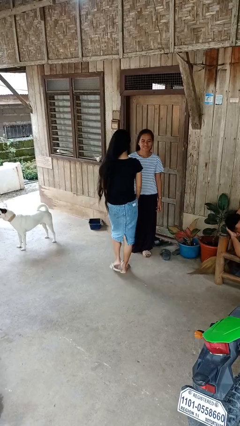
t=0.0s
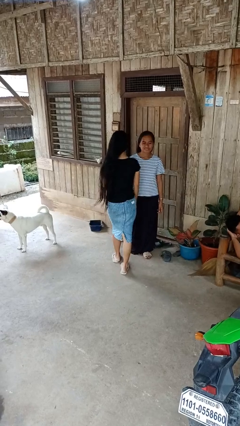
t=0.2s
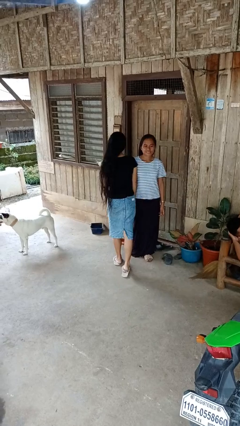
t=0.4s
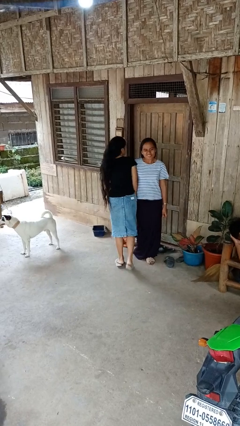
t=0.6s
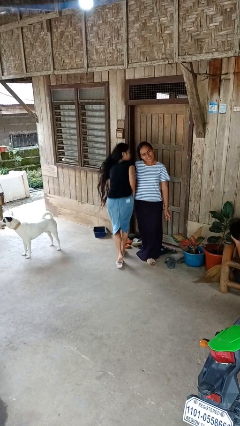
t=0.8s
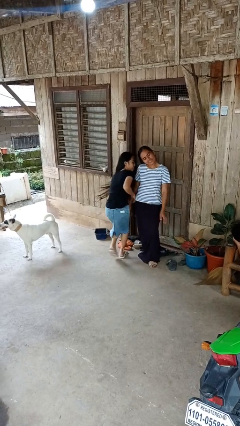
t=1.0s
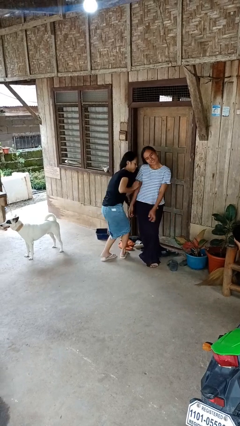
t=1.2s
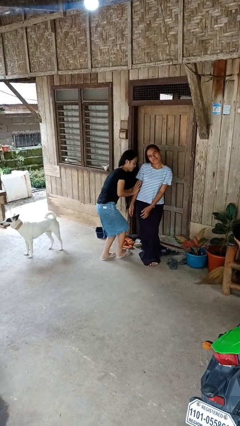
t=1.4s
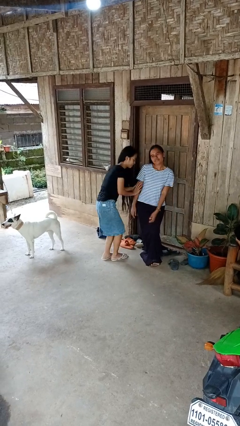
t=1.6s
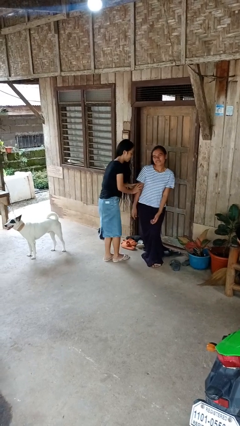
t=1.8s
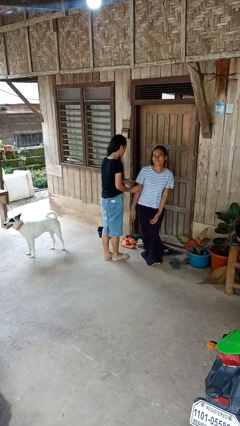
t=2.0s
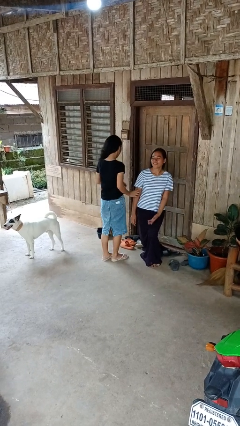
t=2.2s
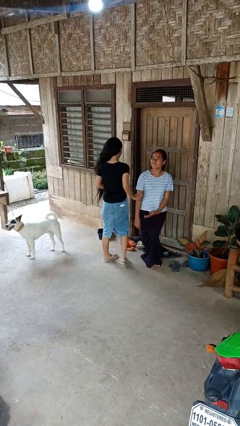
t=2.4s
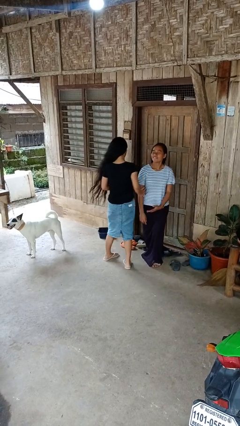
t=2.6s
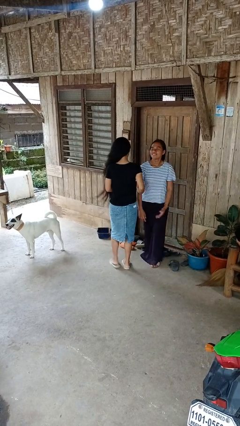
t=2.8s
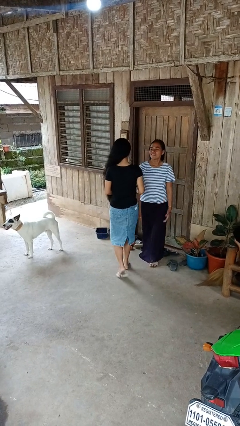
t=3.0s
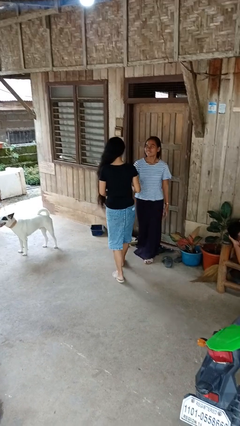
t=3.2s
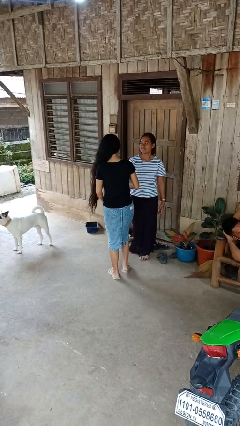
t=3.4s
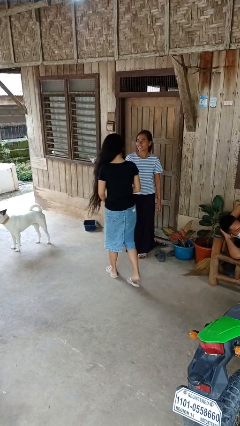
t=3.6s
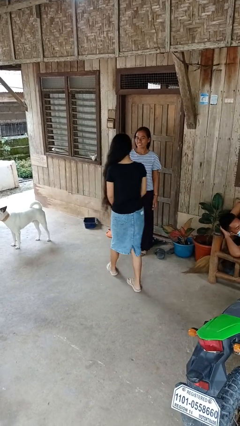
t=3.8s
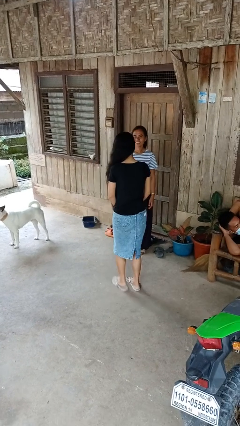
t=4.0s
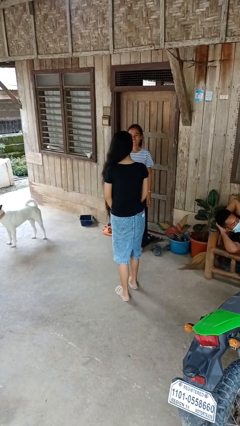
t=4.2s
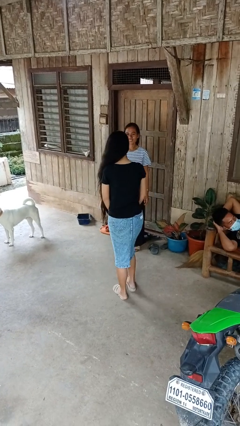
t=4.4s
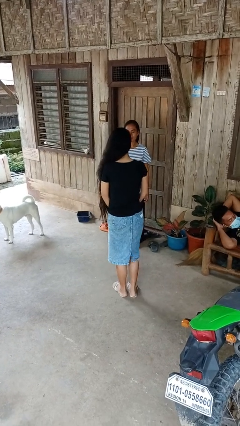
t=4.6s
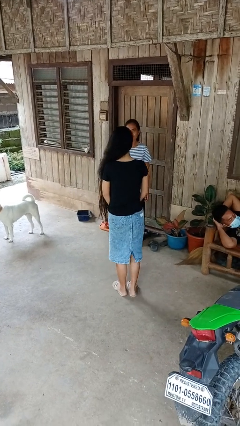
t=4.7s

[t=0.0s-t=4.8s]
person bumps into person

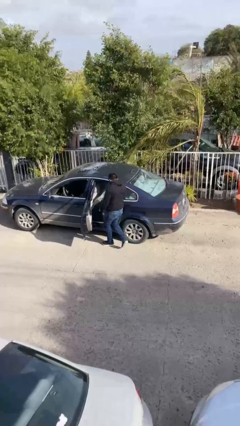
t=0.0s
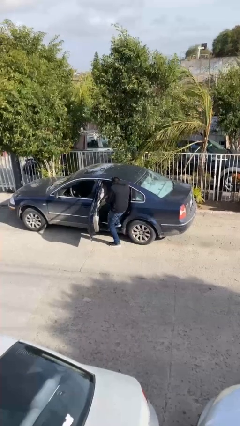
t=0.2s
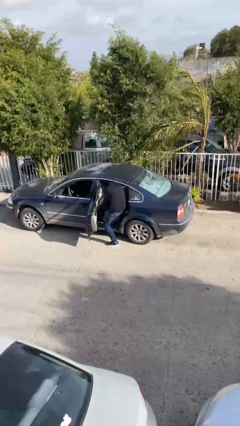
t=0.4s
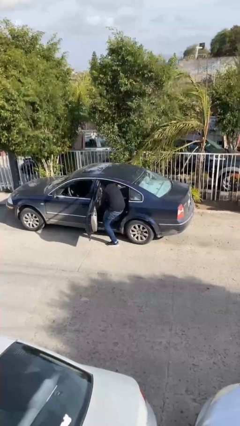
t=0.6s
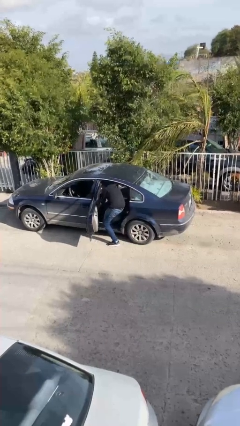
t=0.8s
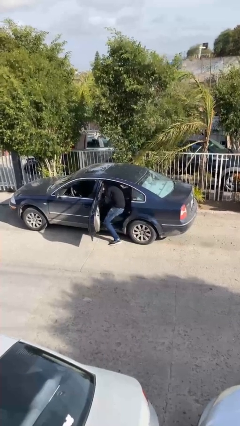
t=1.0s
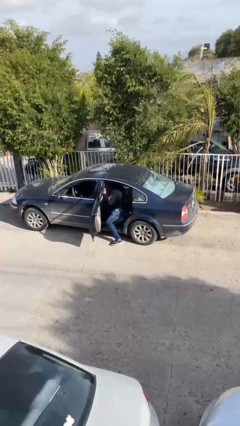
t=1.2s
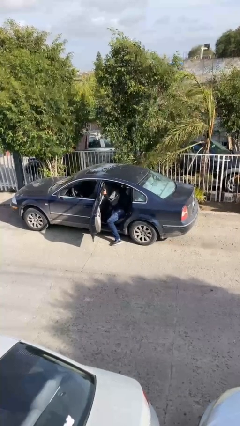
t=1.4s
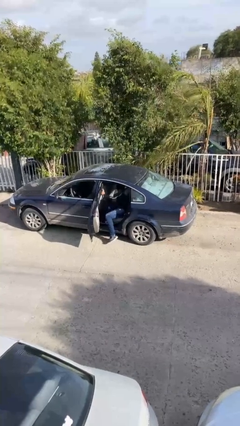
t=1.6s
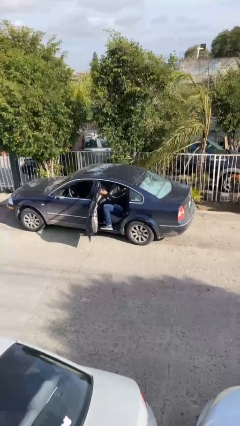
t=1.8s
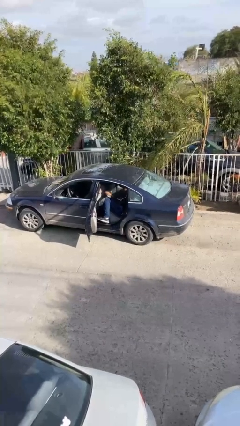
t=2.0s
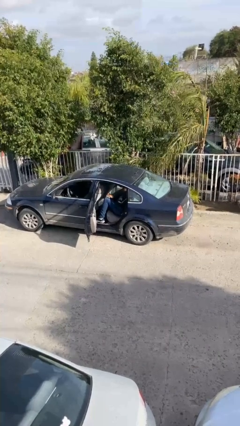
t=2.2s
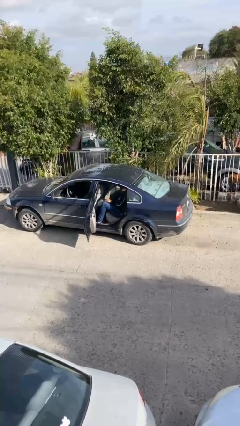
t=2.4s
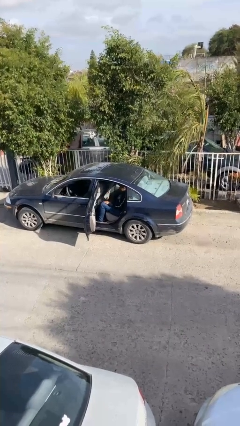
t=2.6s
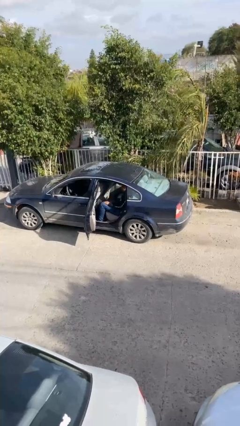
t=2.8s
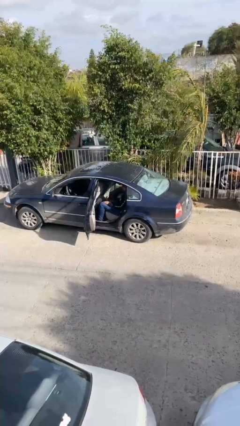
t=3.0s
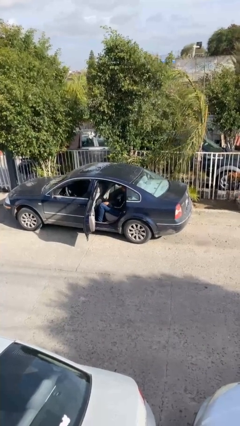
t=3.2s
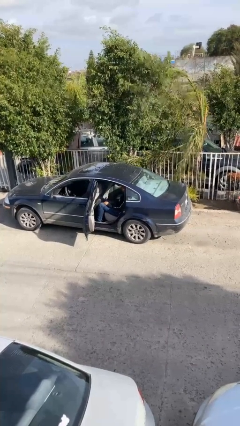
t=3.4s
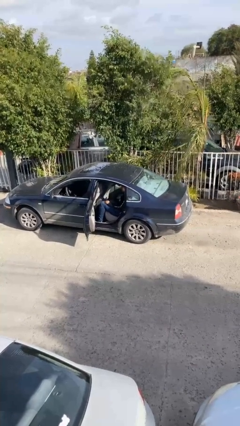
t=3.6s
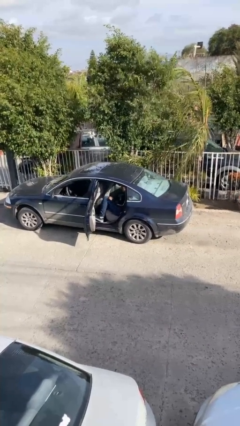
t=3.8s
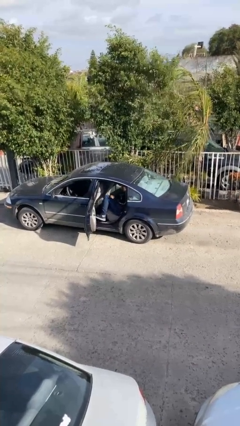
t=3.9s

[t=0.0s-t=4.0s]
person enters car

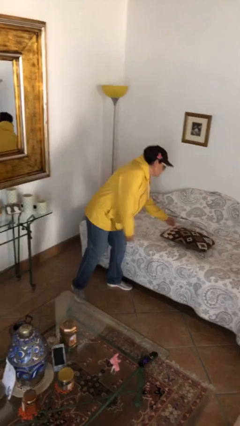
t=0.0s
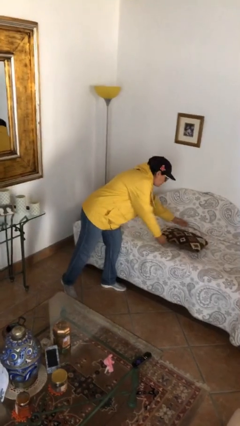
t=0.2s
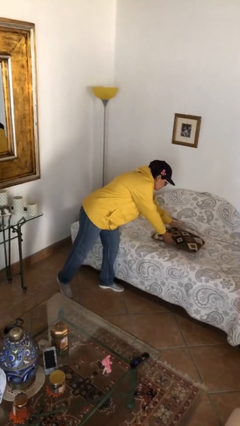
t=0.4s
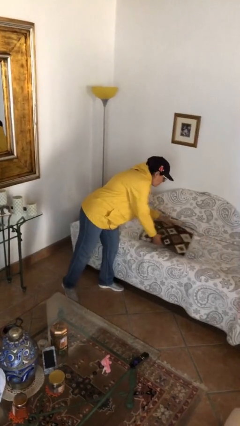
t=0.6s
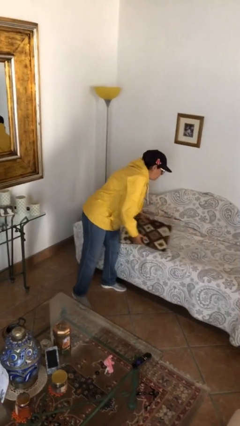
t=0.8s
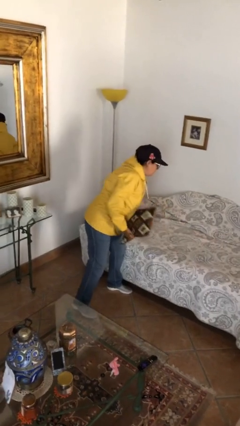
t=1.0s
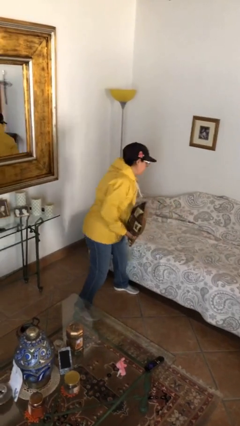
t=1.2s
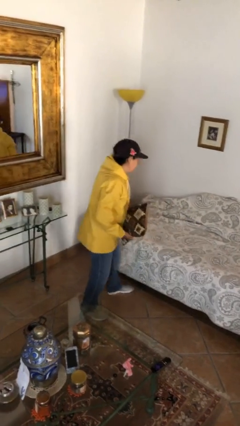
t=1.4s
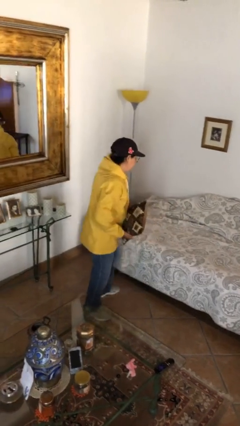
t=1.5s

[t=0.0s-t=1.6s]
person picks up object from bed

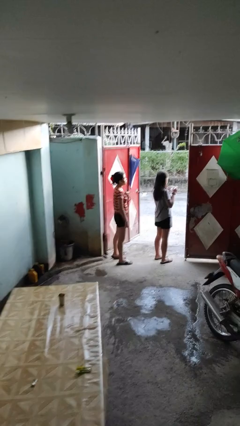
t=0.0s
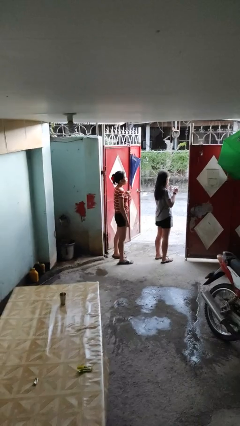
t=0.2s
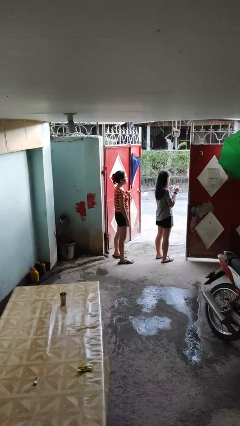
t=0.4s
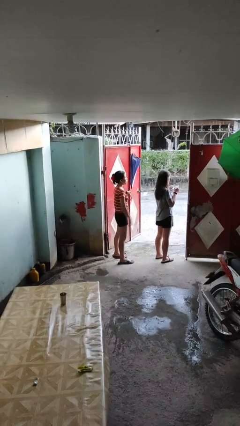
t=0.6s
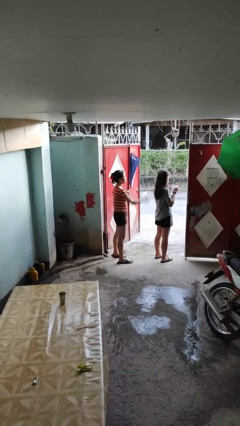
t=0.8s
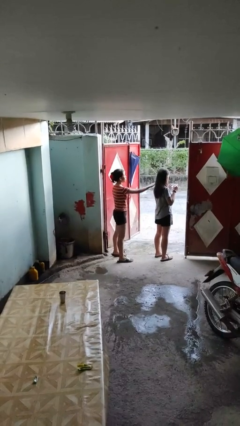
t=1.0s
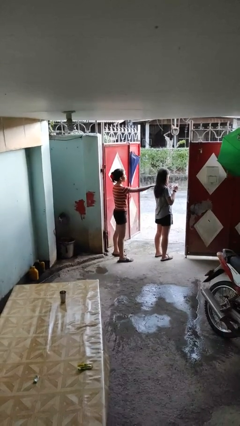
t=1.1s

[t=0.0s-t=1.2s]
person grabs person by shoulder

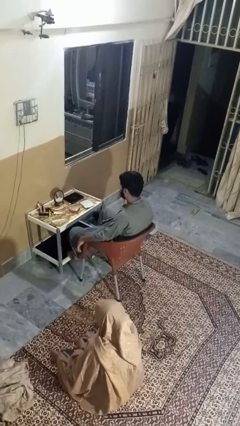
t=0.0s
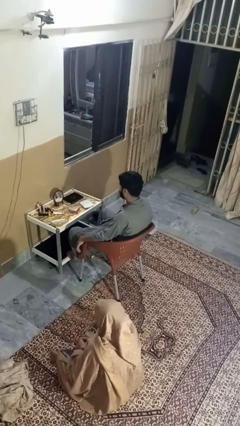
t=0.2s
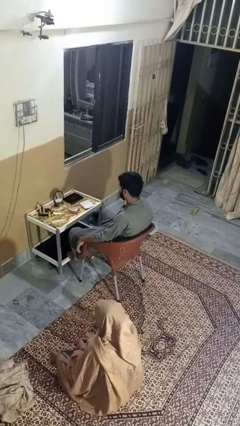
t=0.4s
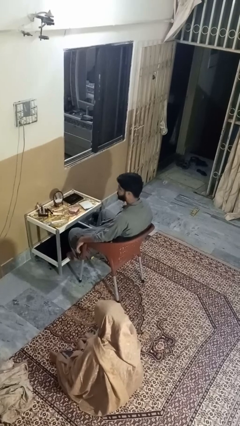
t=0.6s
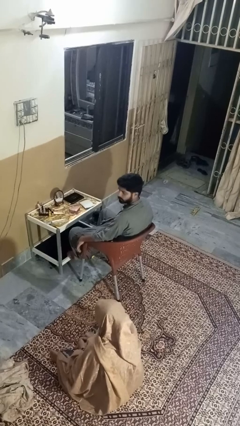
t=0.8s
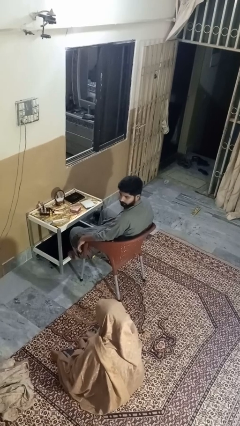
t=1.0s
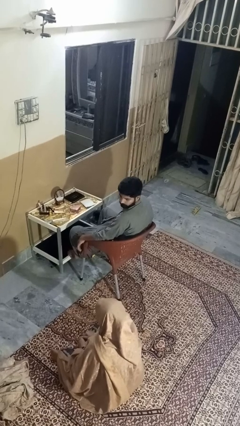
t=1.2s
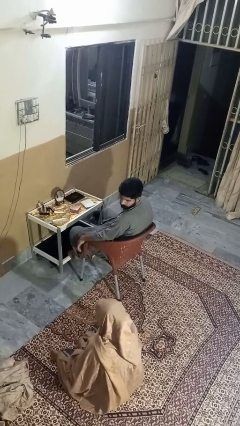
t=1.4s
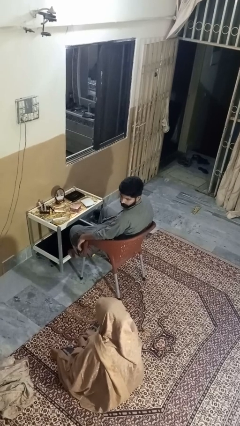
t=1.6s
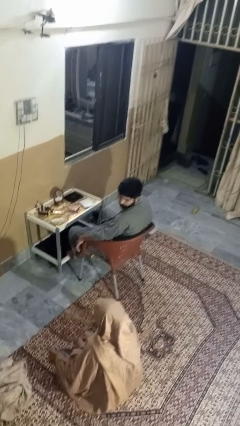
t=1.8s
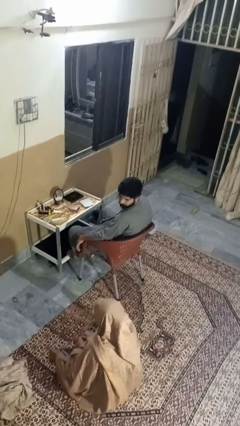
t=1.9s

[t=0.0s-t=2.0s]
person looks over shoulder

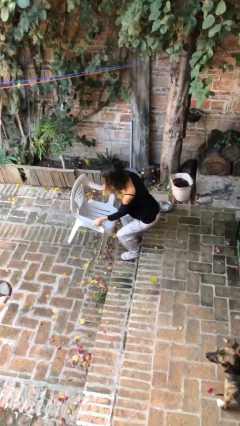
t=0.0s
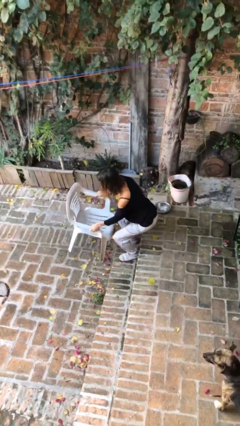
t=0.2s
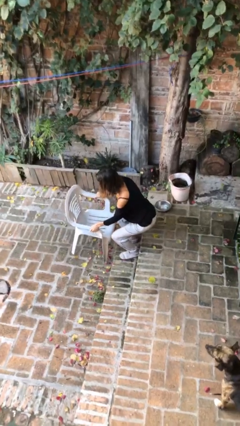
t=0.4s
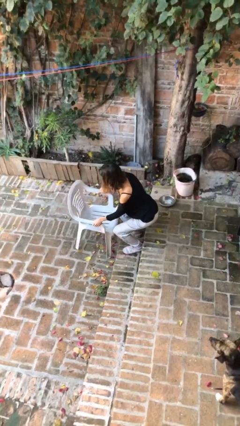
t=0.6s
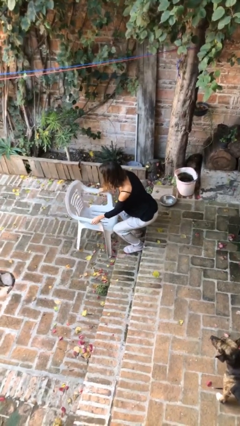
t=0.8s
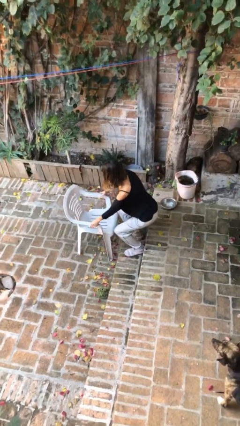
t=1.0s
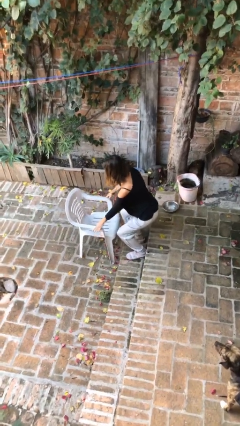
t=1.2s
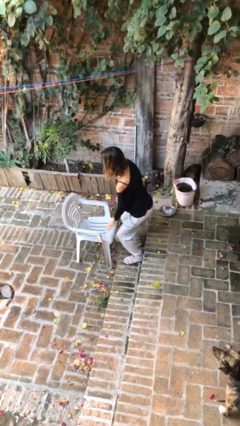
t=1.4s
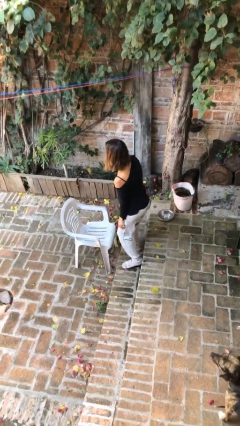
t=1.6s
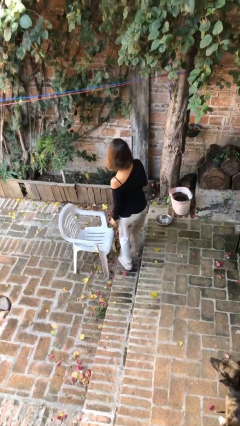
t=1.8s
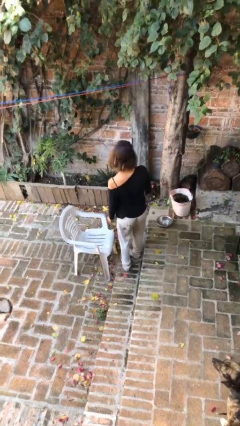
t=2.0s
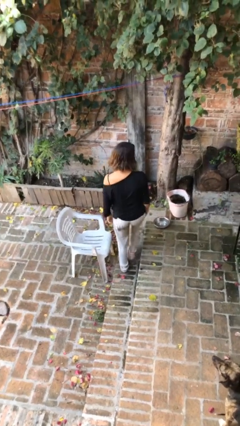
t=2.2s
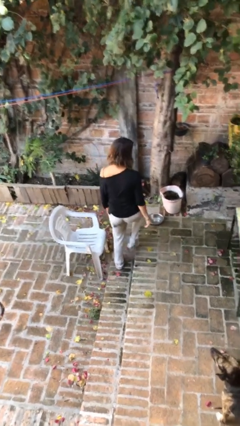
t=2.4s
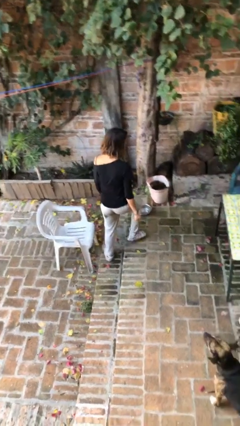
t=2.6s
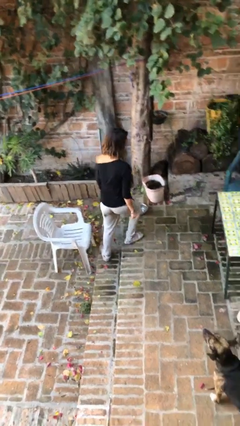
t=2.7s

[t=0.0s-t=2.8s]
person puts down object on floor

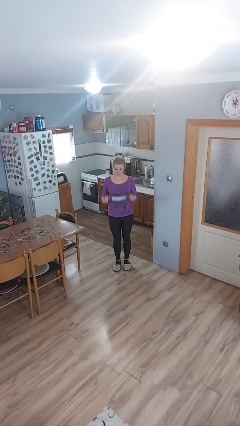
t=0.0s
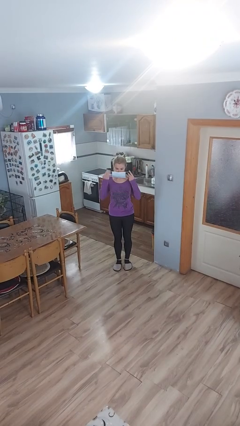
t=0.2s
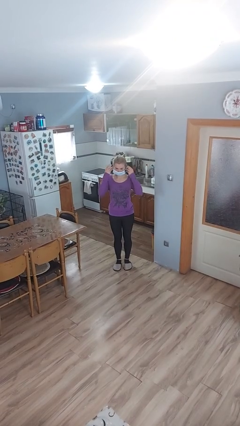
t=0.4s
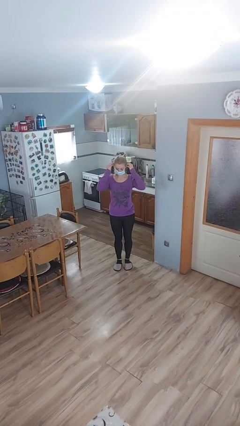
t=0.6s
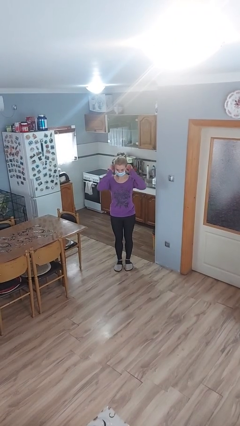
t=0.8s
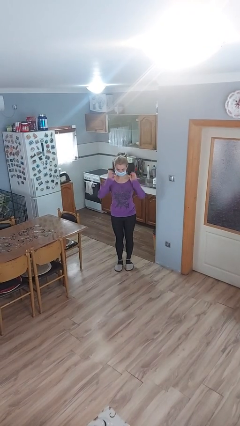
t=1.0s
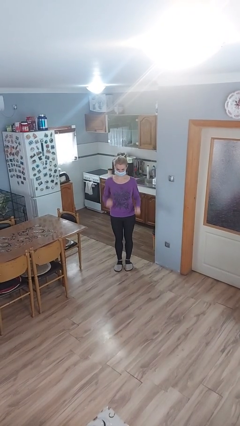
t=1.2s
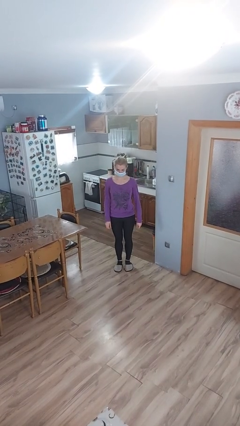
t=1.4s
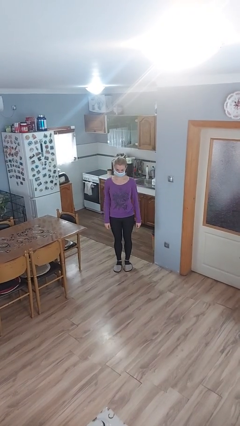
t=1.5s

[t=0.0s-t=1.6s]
person puts on facemask
